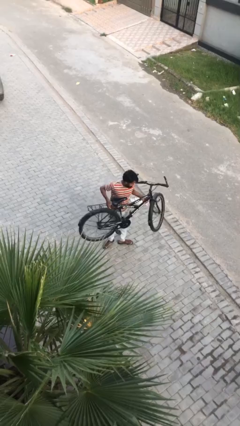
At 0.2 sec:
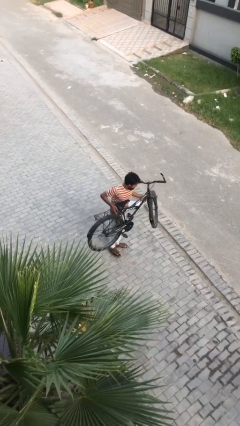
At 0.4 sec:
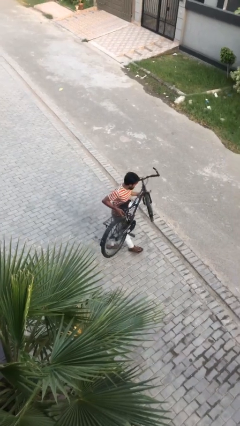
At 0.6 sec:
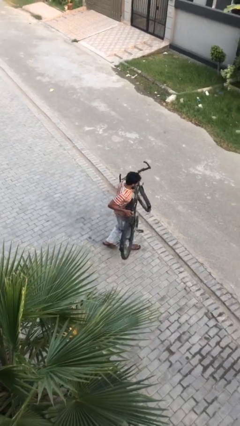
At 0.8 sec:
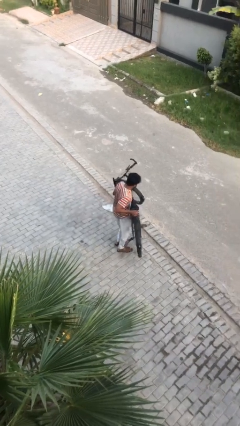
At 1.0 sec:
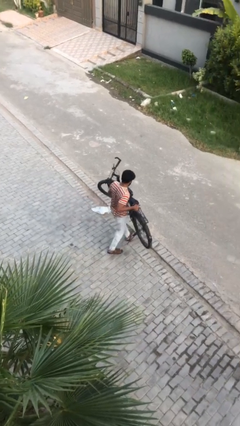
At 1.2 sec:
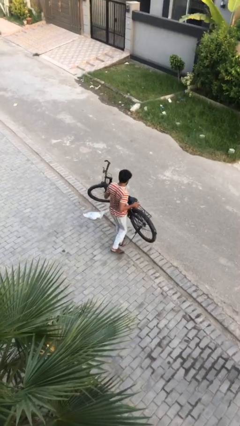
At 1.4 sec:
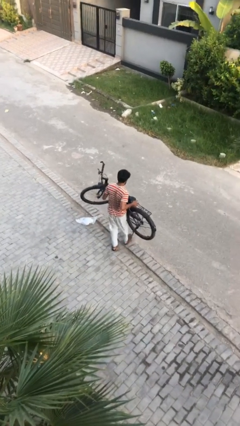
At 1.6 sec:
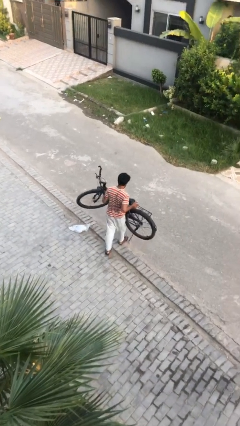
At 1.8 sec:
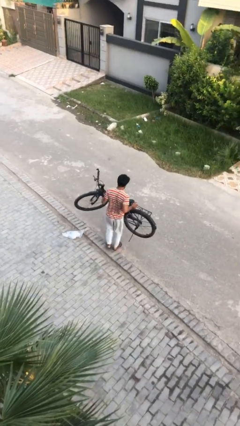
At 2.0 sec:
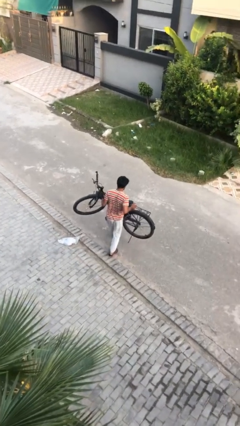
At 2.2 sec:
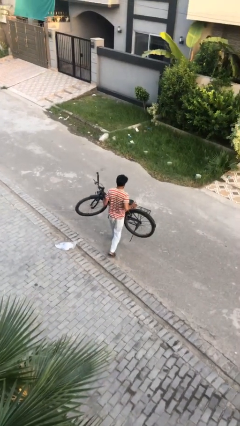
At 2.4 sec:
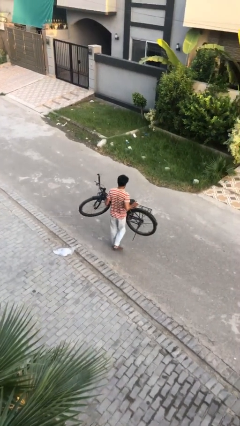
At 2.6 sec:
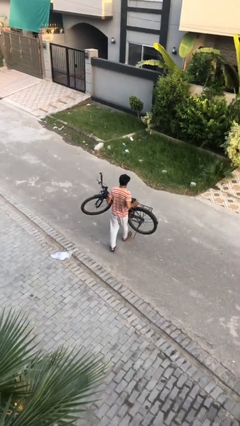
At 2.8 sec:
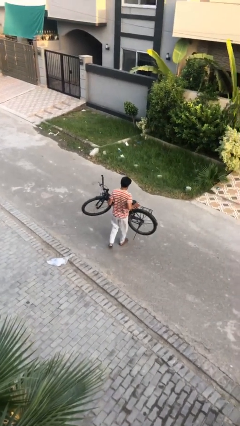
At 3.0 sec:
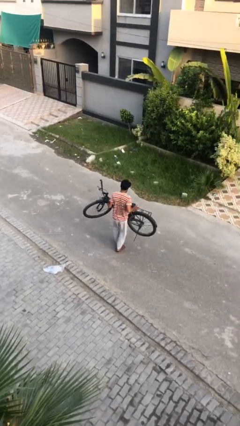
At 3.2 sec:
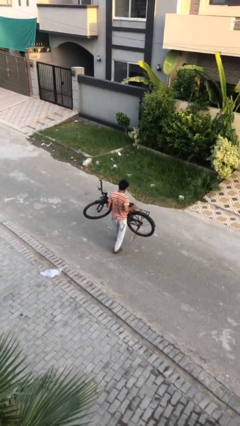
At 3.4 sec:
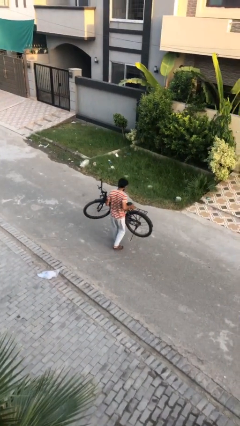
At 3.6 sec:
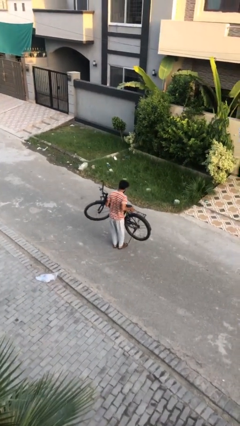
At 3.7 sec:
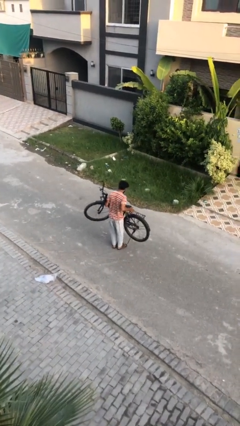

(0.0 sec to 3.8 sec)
person carries heavy object

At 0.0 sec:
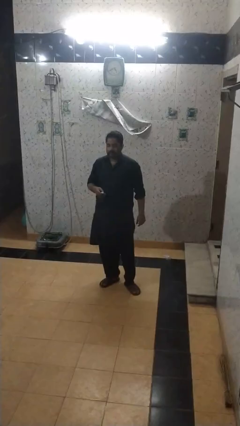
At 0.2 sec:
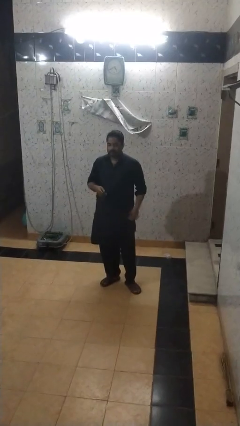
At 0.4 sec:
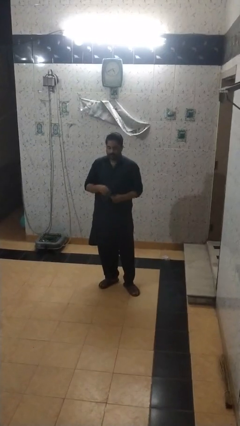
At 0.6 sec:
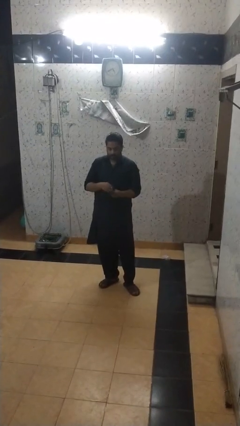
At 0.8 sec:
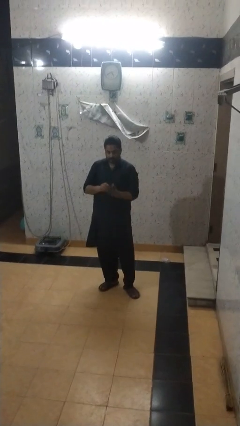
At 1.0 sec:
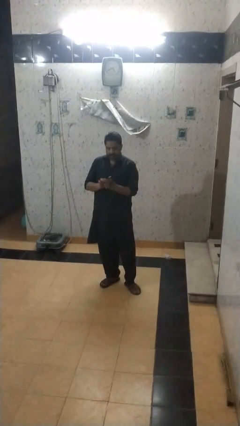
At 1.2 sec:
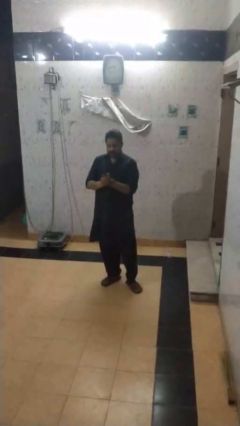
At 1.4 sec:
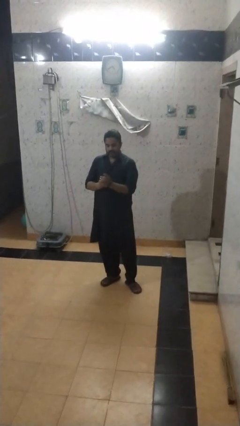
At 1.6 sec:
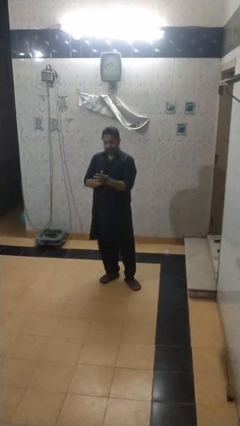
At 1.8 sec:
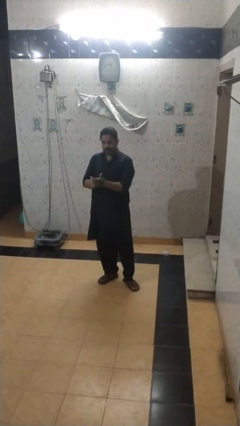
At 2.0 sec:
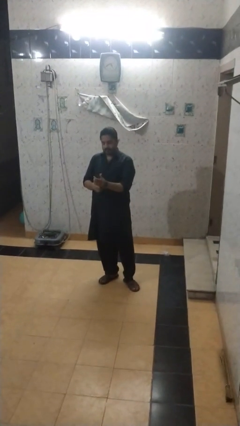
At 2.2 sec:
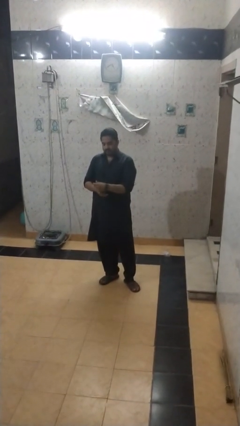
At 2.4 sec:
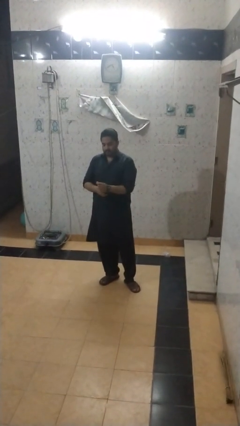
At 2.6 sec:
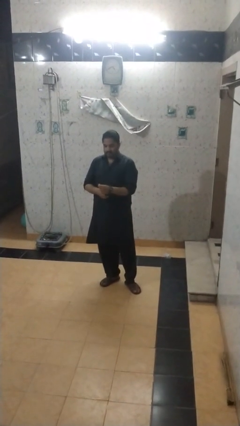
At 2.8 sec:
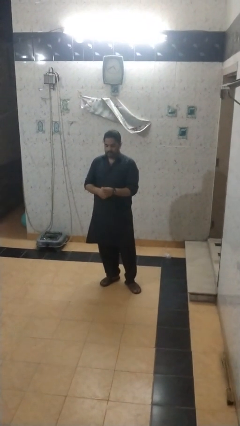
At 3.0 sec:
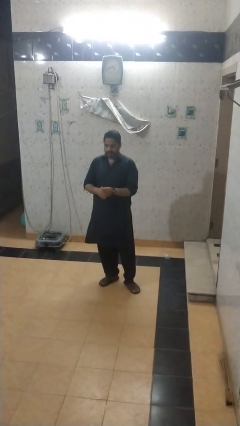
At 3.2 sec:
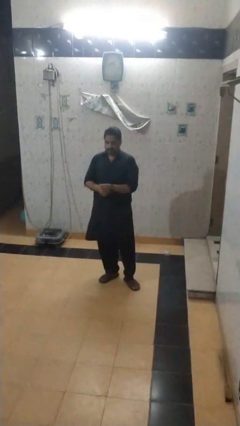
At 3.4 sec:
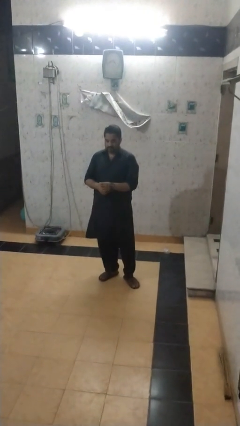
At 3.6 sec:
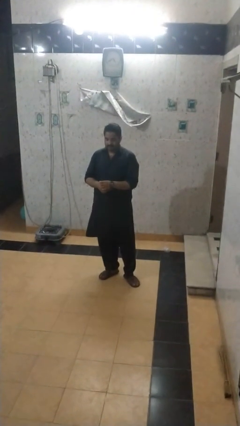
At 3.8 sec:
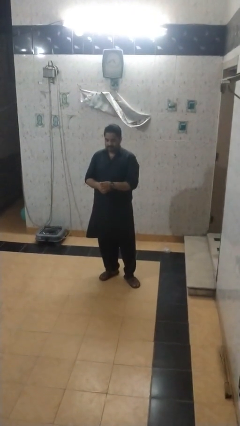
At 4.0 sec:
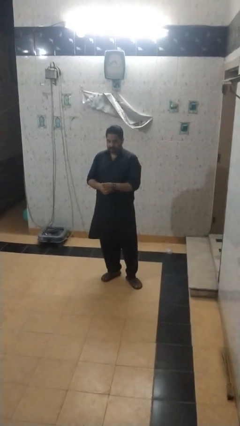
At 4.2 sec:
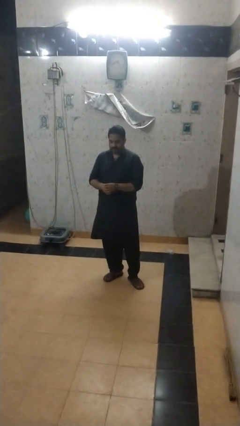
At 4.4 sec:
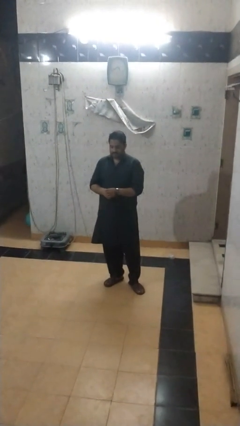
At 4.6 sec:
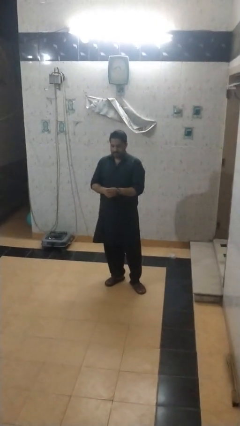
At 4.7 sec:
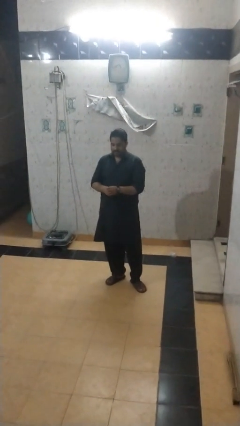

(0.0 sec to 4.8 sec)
person puts on wristwatch

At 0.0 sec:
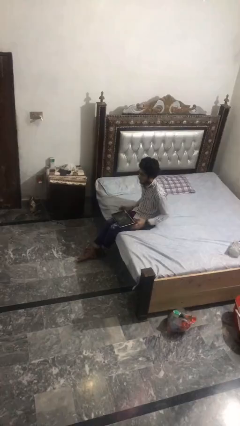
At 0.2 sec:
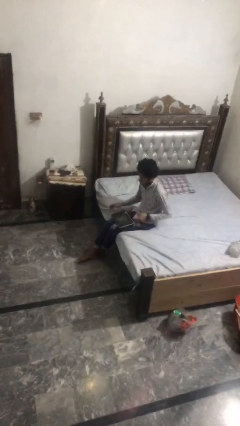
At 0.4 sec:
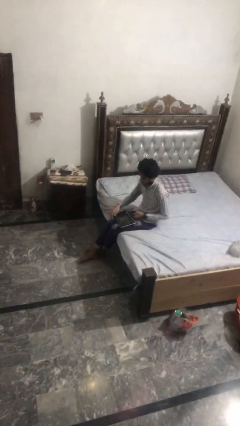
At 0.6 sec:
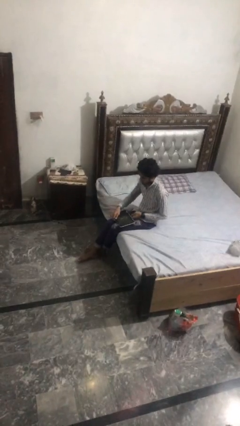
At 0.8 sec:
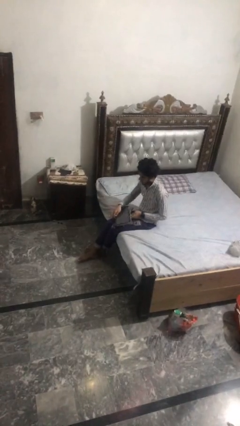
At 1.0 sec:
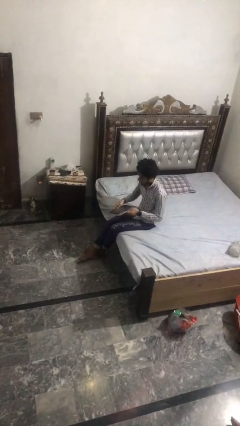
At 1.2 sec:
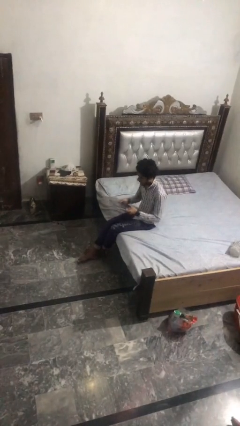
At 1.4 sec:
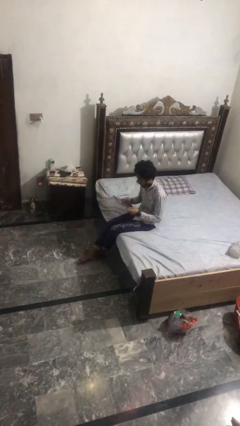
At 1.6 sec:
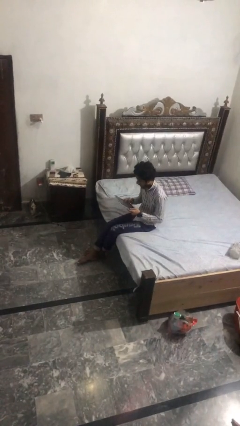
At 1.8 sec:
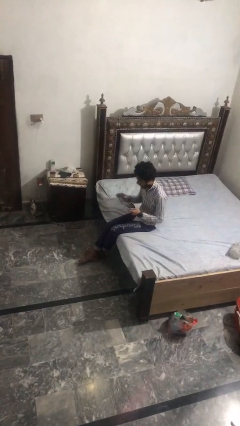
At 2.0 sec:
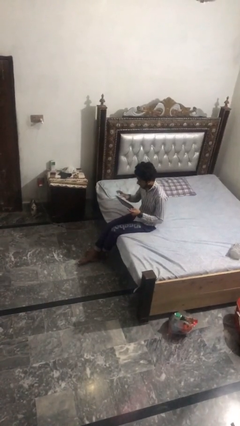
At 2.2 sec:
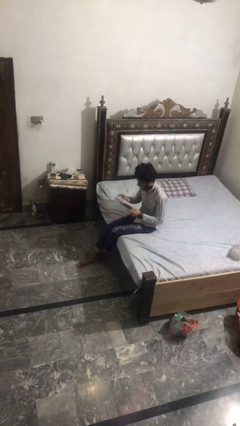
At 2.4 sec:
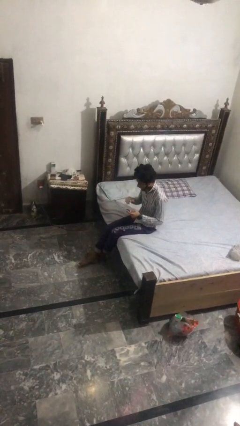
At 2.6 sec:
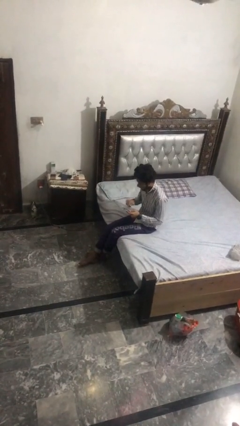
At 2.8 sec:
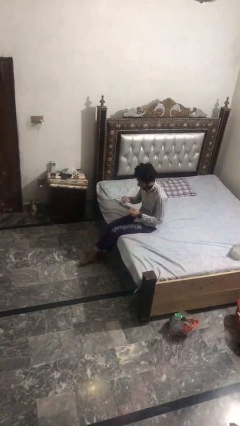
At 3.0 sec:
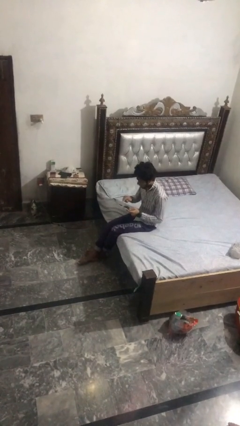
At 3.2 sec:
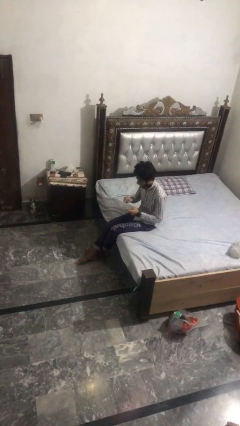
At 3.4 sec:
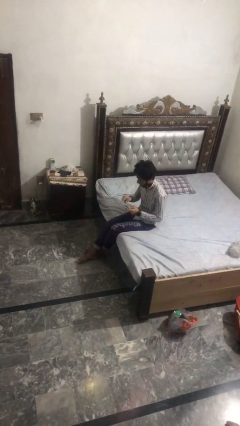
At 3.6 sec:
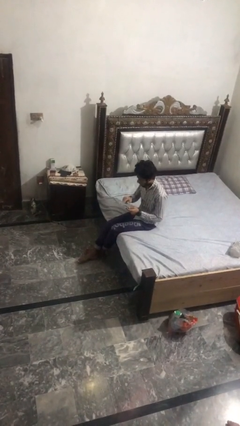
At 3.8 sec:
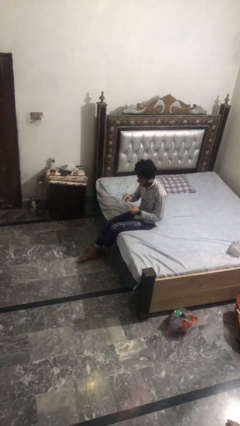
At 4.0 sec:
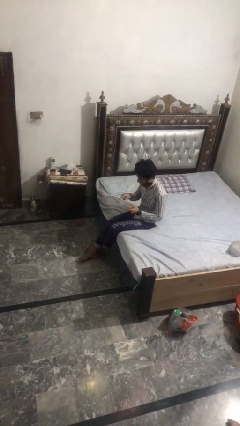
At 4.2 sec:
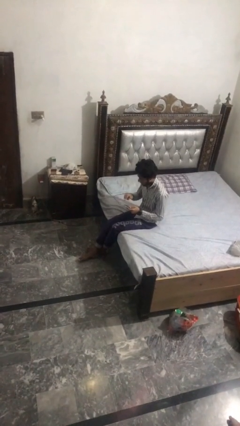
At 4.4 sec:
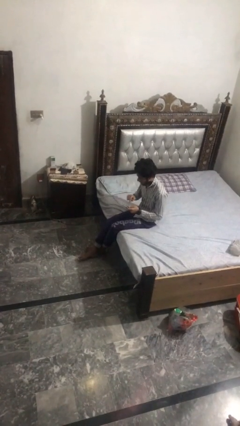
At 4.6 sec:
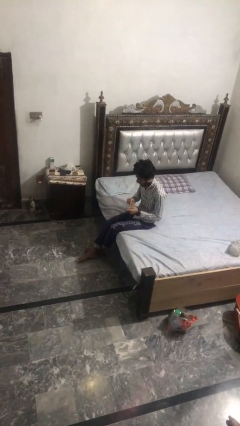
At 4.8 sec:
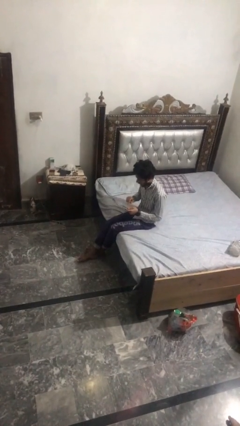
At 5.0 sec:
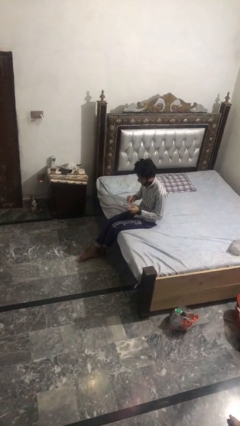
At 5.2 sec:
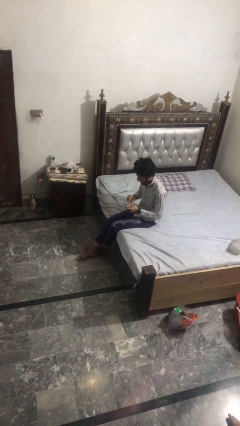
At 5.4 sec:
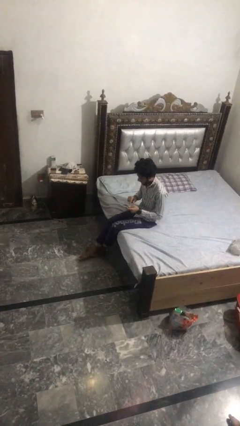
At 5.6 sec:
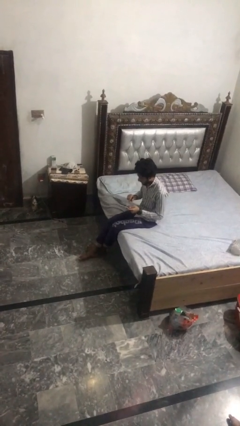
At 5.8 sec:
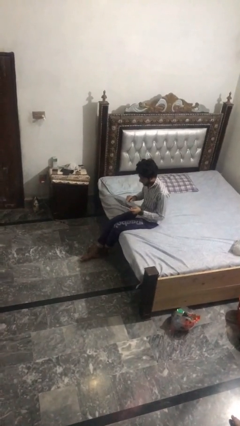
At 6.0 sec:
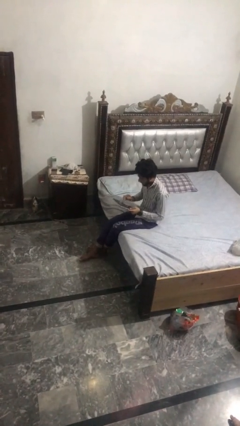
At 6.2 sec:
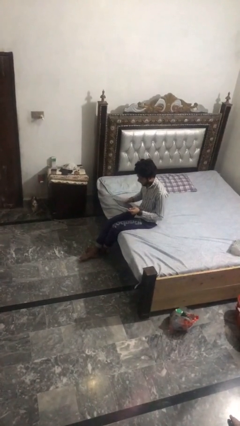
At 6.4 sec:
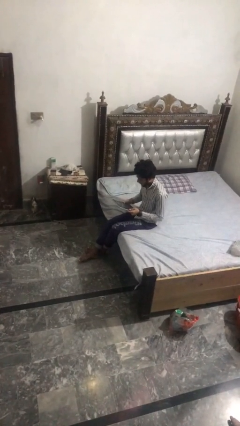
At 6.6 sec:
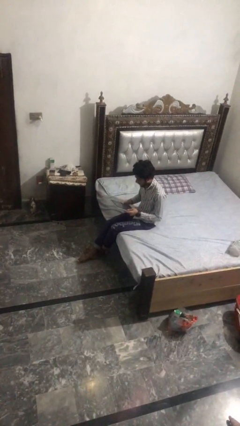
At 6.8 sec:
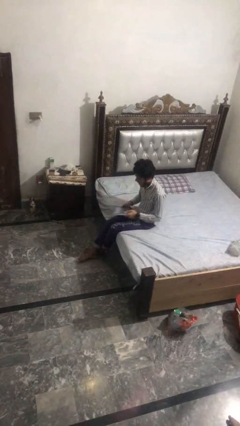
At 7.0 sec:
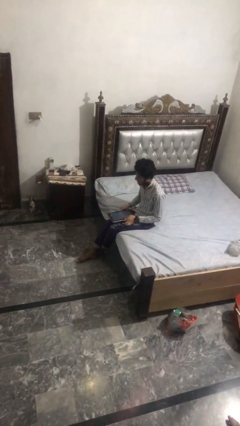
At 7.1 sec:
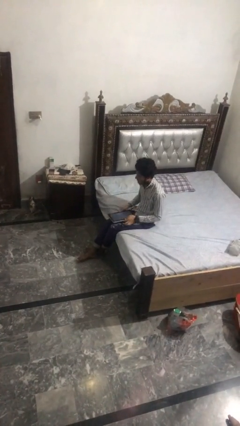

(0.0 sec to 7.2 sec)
person interacts with tablet

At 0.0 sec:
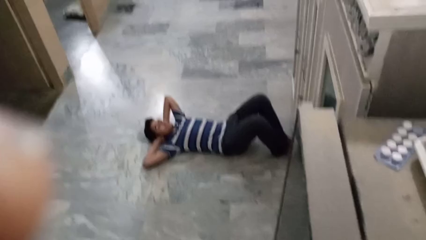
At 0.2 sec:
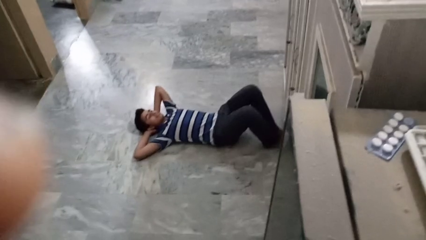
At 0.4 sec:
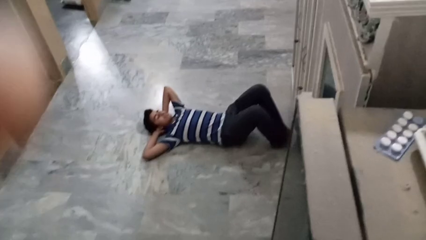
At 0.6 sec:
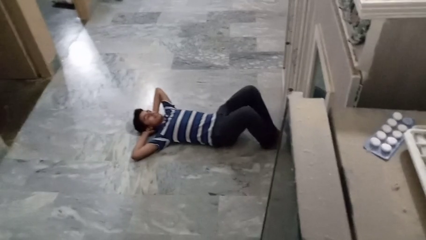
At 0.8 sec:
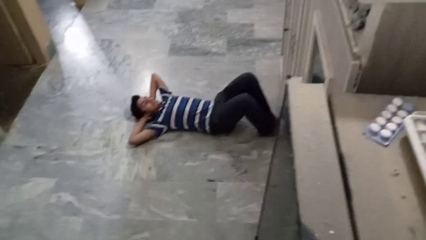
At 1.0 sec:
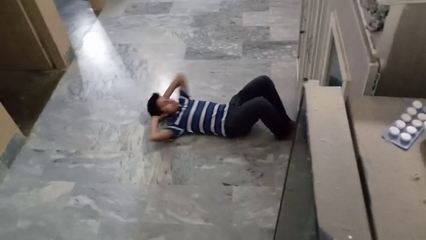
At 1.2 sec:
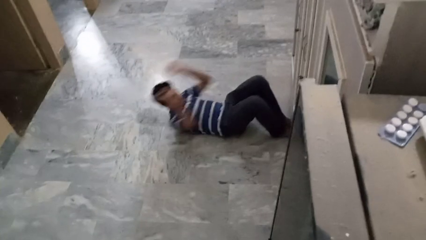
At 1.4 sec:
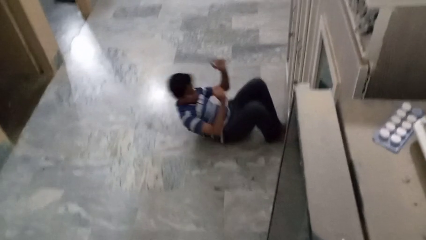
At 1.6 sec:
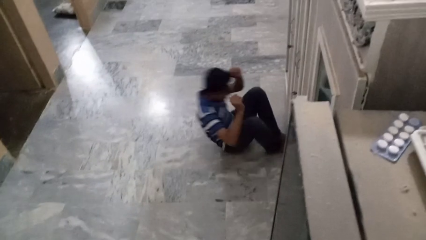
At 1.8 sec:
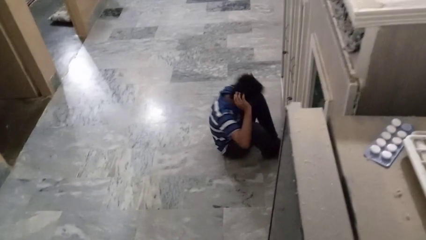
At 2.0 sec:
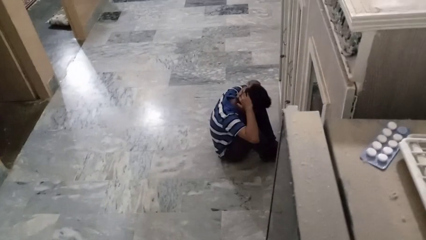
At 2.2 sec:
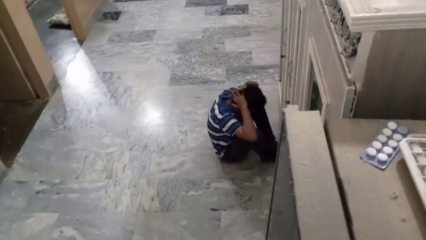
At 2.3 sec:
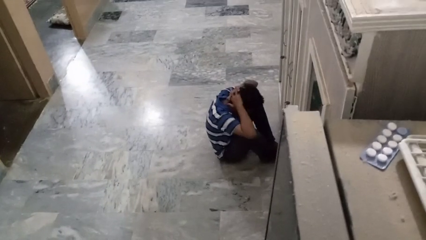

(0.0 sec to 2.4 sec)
person exercises with situp

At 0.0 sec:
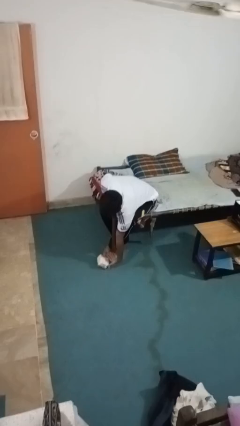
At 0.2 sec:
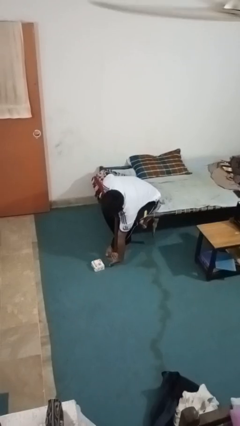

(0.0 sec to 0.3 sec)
person catches dropped object
